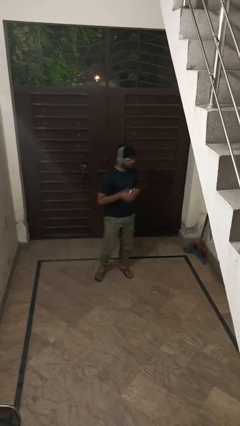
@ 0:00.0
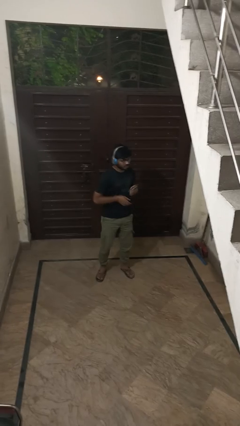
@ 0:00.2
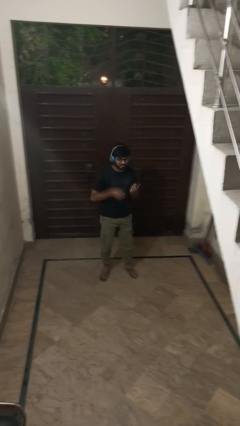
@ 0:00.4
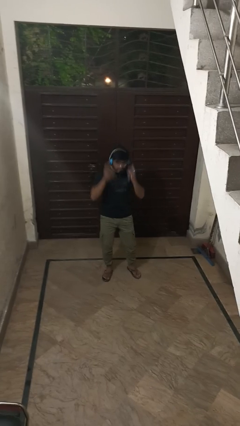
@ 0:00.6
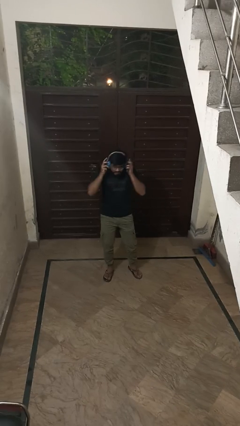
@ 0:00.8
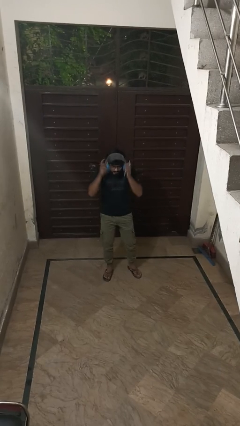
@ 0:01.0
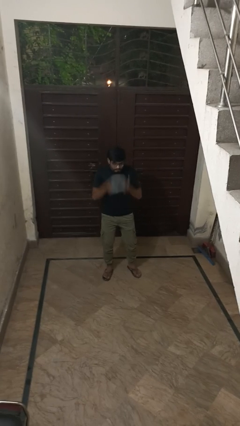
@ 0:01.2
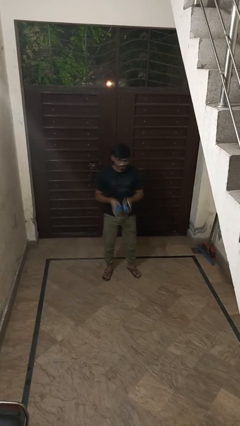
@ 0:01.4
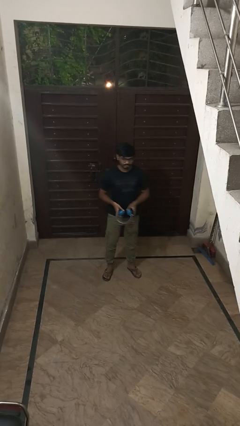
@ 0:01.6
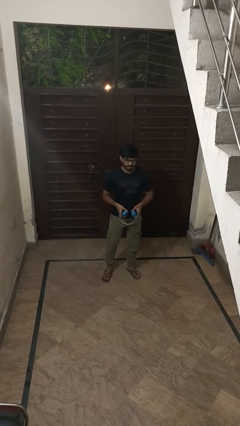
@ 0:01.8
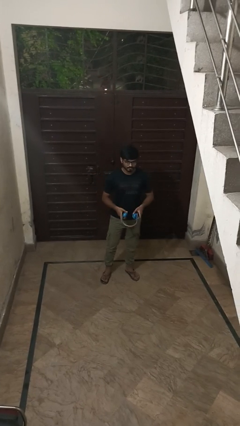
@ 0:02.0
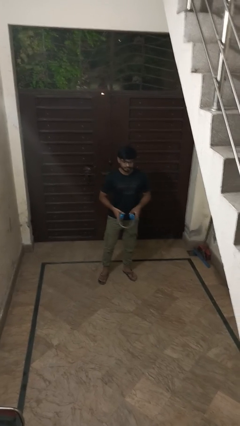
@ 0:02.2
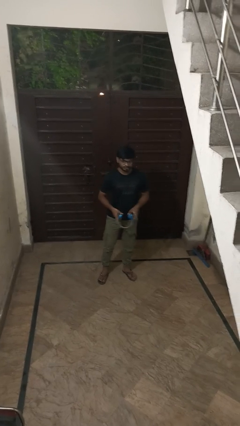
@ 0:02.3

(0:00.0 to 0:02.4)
person takes off headphones

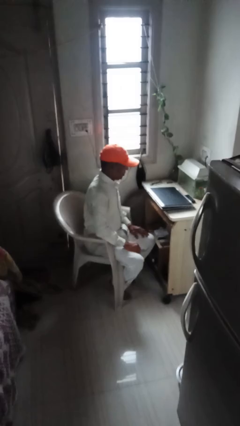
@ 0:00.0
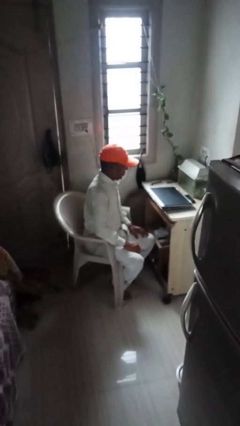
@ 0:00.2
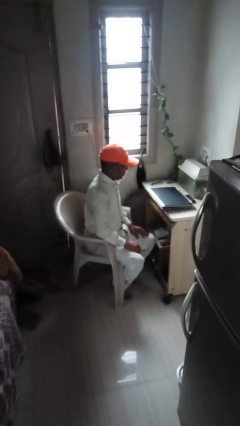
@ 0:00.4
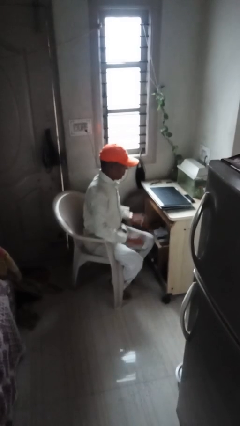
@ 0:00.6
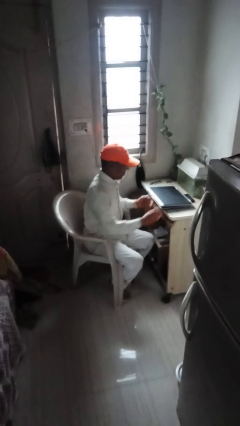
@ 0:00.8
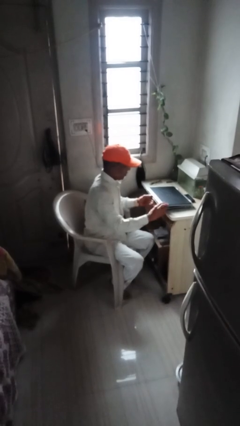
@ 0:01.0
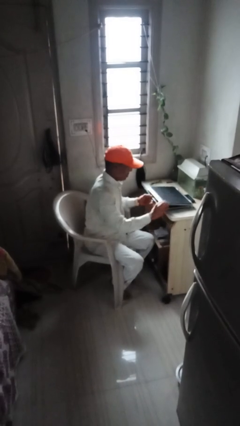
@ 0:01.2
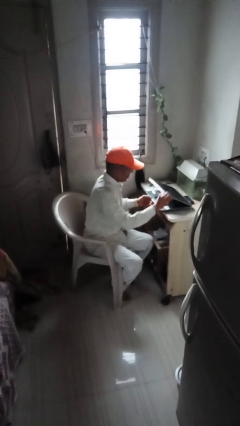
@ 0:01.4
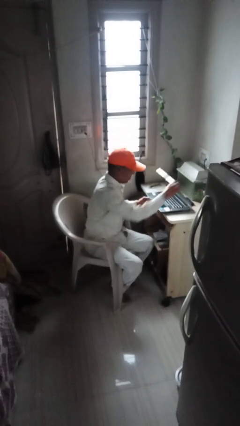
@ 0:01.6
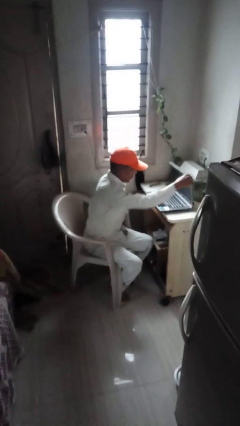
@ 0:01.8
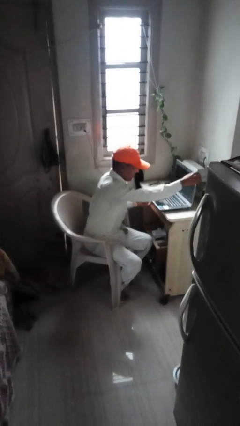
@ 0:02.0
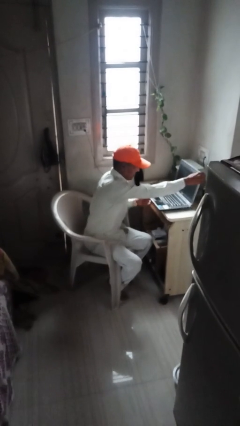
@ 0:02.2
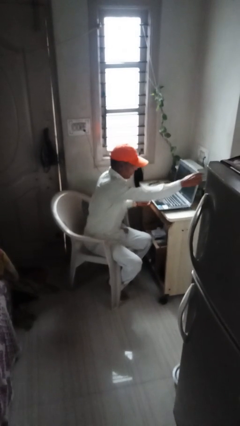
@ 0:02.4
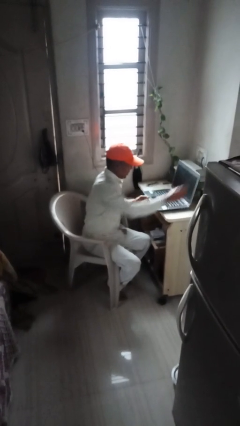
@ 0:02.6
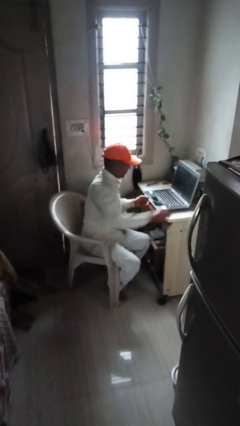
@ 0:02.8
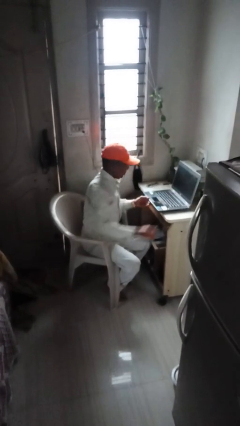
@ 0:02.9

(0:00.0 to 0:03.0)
person opens laptop

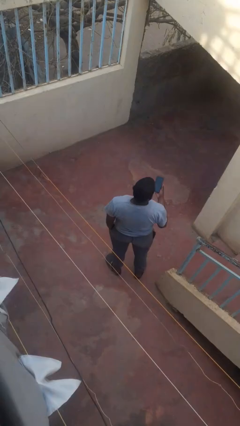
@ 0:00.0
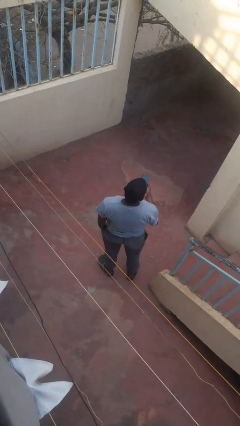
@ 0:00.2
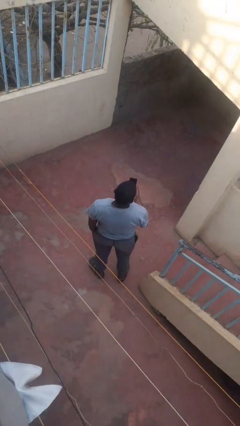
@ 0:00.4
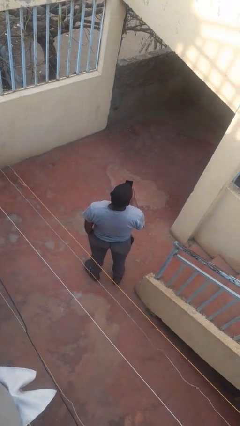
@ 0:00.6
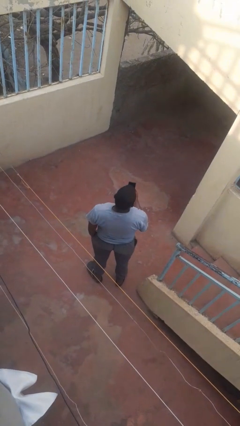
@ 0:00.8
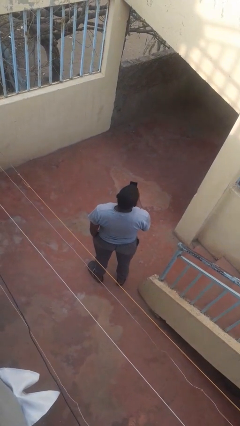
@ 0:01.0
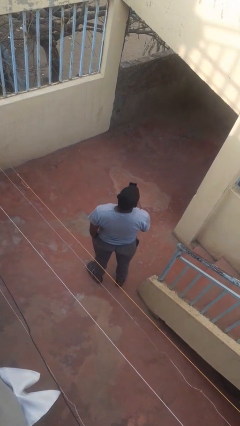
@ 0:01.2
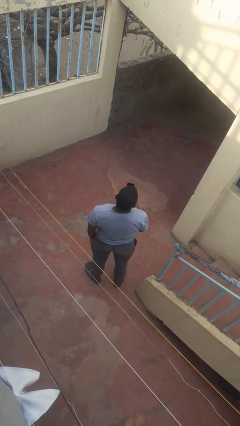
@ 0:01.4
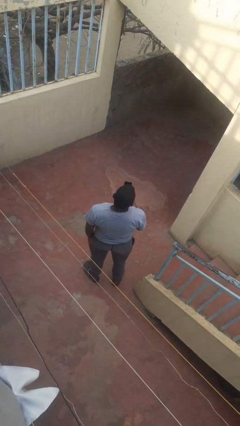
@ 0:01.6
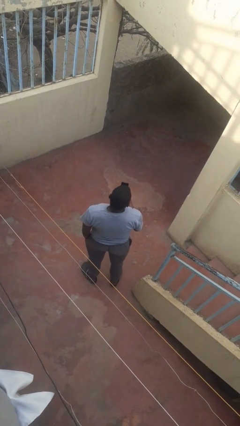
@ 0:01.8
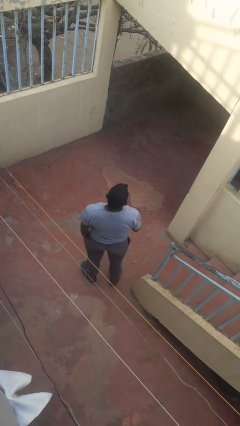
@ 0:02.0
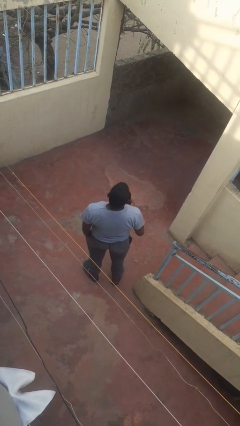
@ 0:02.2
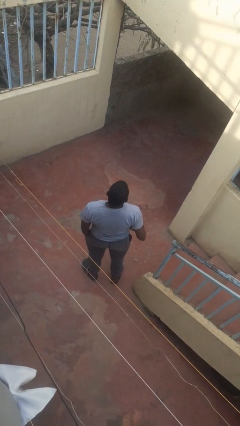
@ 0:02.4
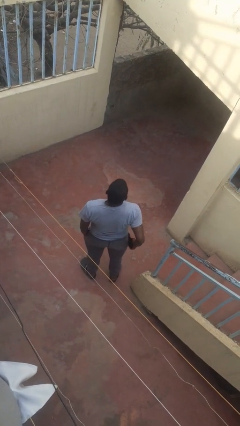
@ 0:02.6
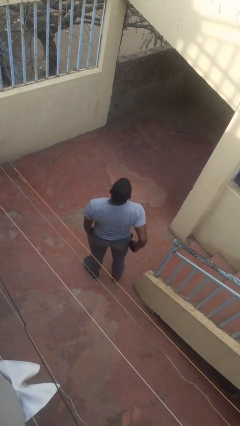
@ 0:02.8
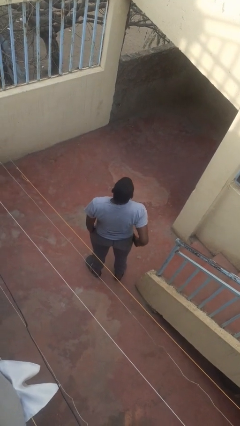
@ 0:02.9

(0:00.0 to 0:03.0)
person takes phone from pocket

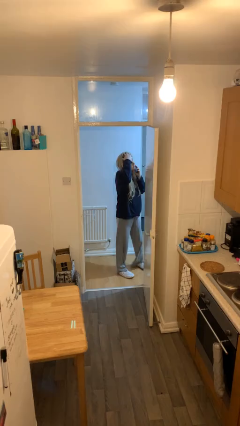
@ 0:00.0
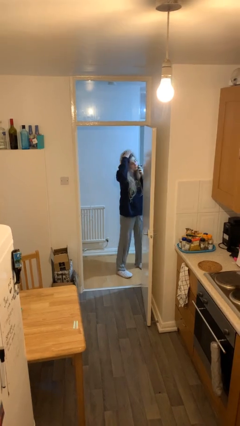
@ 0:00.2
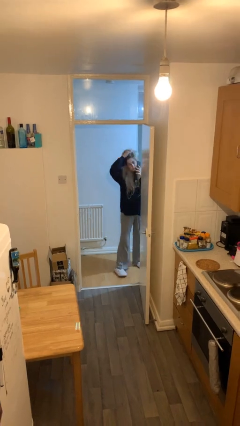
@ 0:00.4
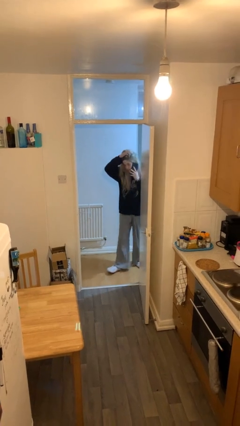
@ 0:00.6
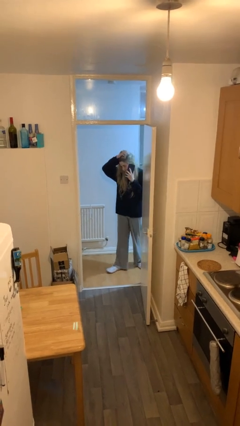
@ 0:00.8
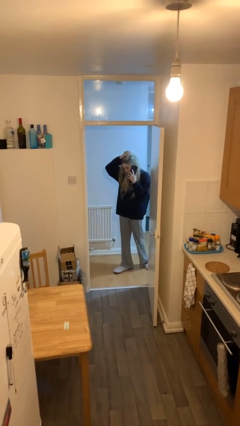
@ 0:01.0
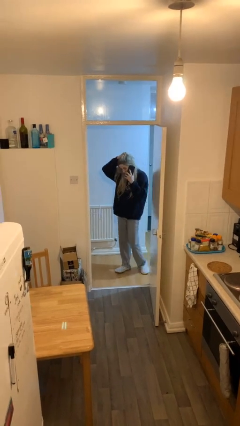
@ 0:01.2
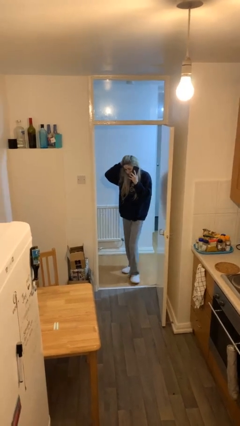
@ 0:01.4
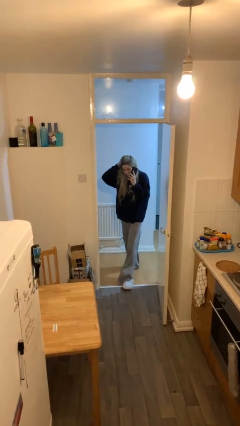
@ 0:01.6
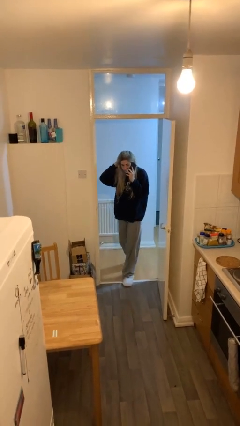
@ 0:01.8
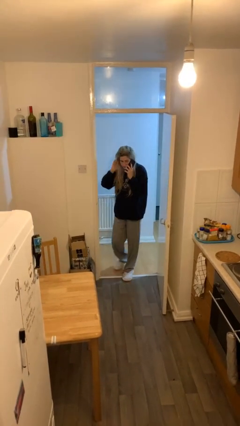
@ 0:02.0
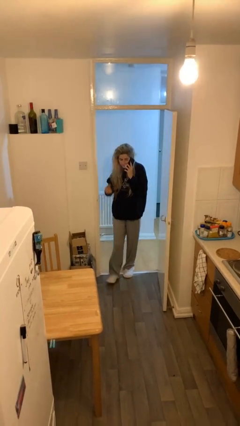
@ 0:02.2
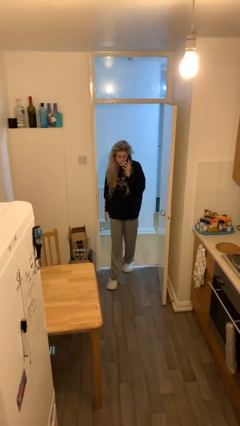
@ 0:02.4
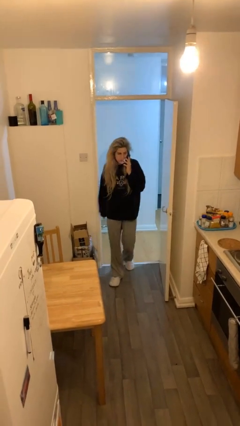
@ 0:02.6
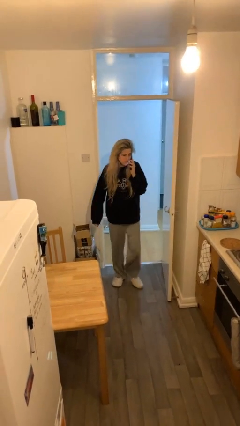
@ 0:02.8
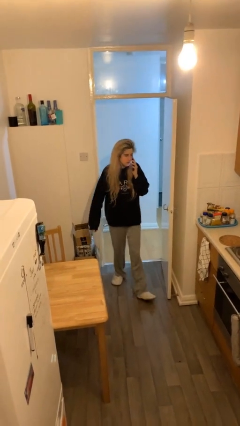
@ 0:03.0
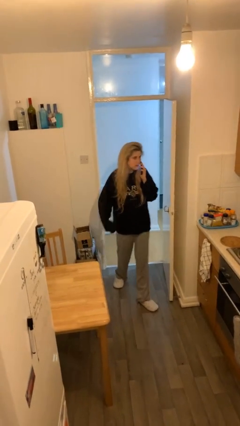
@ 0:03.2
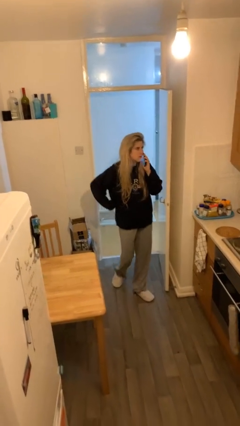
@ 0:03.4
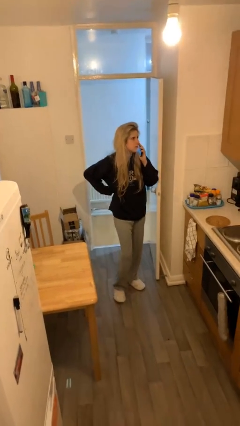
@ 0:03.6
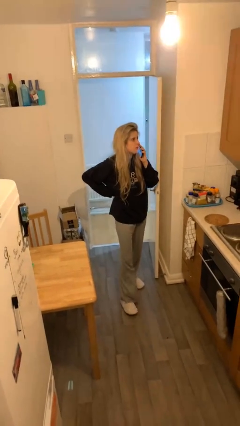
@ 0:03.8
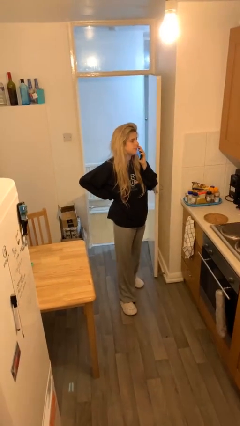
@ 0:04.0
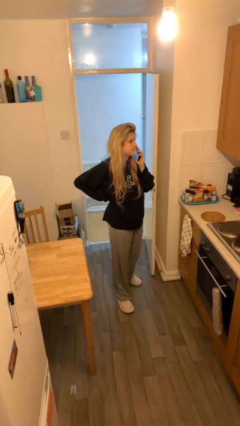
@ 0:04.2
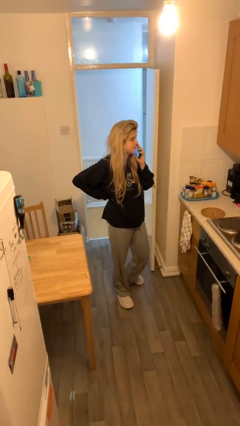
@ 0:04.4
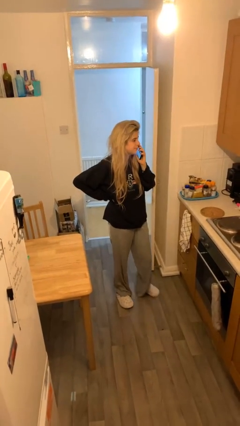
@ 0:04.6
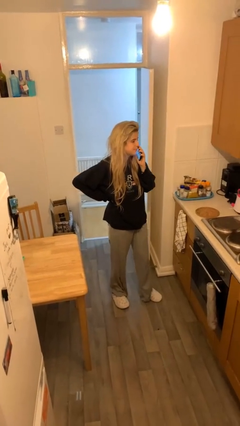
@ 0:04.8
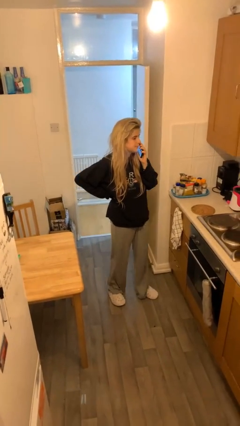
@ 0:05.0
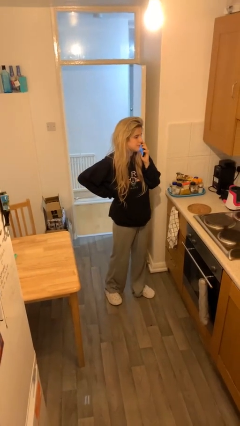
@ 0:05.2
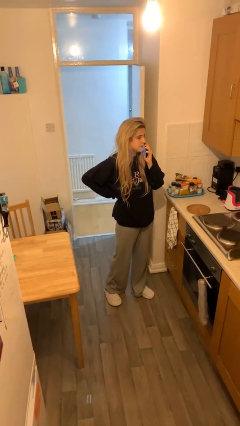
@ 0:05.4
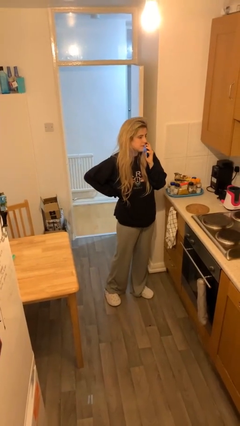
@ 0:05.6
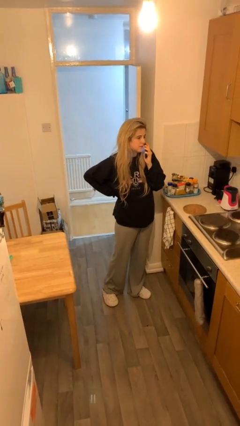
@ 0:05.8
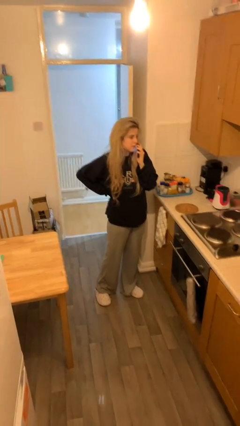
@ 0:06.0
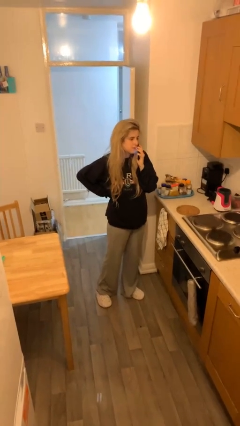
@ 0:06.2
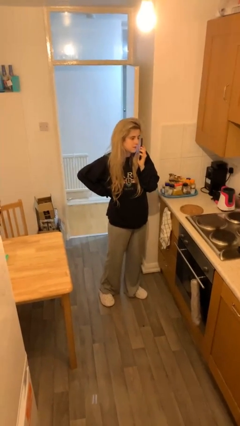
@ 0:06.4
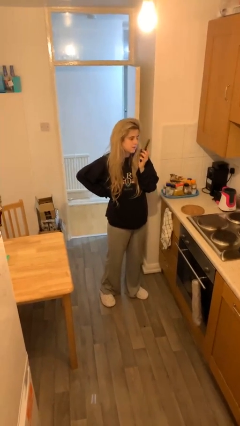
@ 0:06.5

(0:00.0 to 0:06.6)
person enters scene through structure

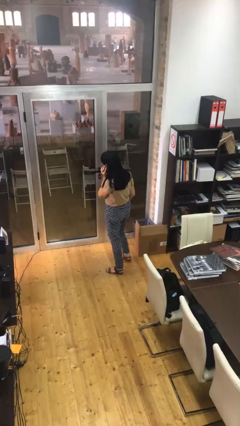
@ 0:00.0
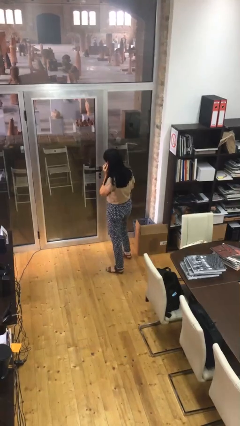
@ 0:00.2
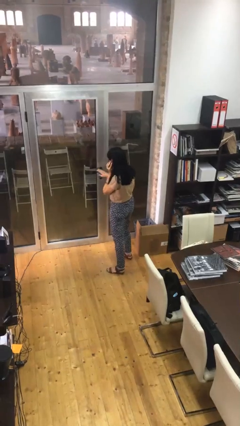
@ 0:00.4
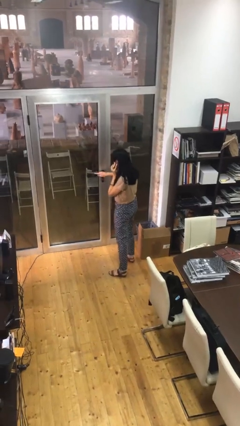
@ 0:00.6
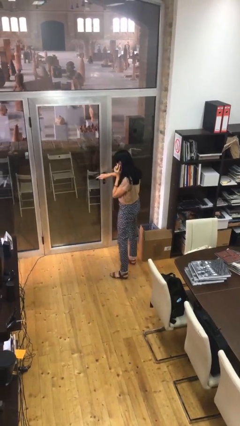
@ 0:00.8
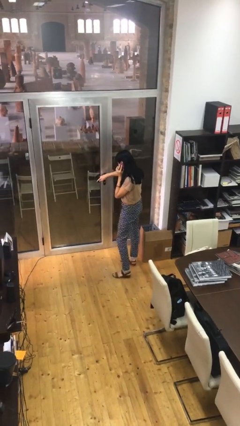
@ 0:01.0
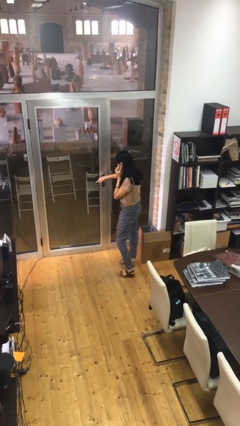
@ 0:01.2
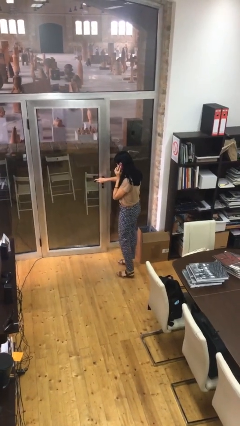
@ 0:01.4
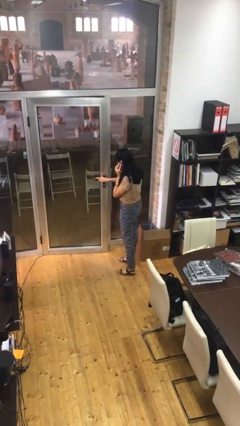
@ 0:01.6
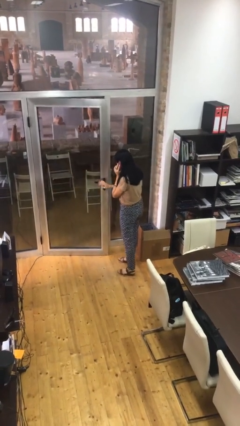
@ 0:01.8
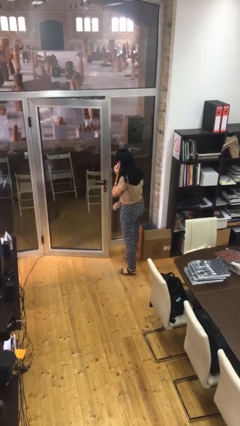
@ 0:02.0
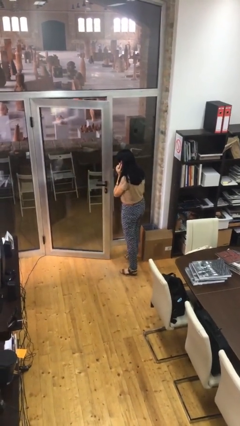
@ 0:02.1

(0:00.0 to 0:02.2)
person opens facility door

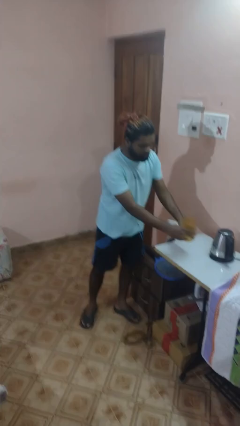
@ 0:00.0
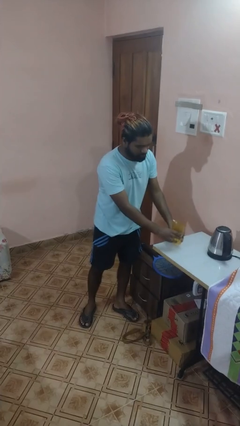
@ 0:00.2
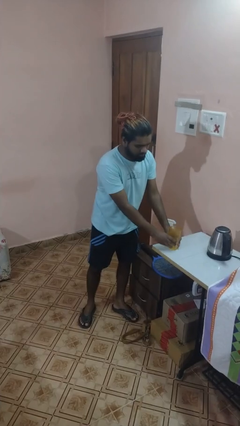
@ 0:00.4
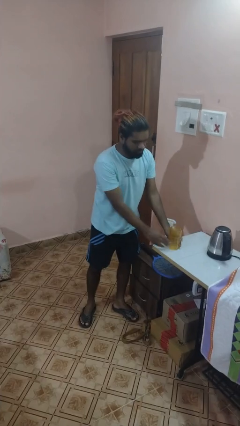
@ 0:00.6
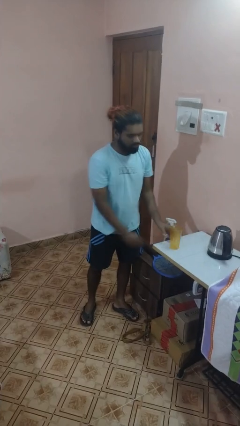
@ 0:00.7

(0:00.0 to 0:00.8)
person sets upright glass
